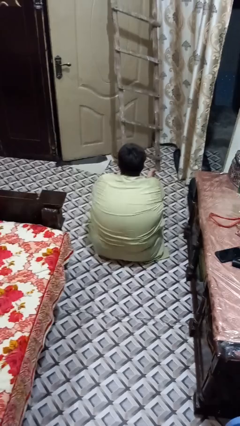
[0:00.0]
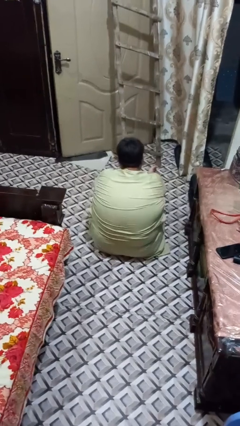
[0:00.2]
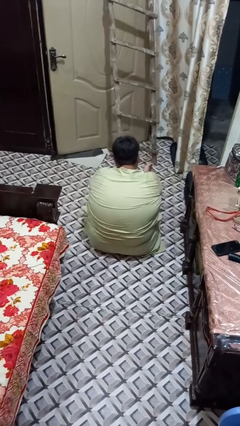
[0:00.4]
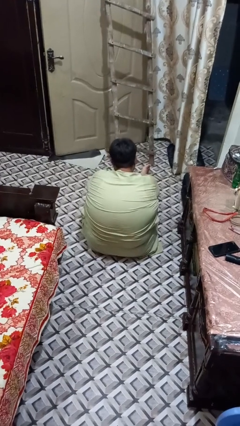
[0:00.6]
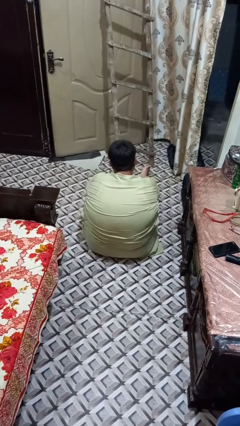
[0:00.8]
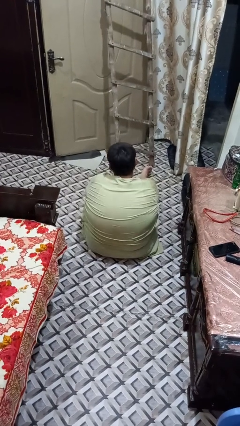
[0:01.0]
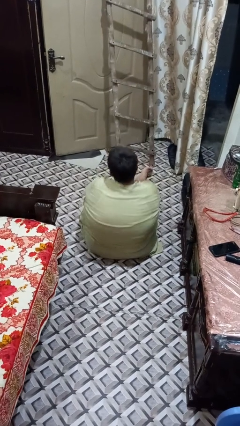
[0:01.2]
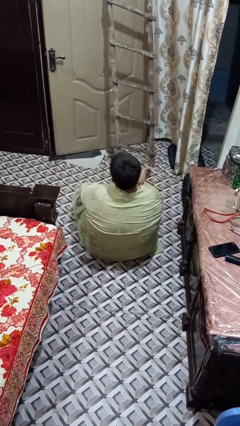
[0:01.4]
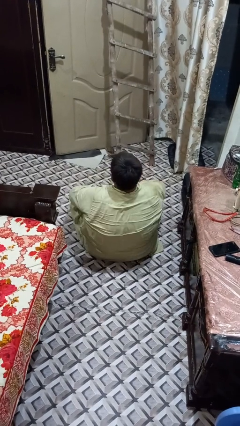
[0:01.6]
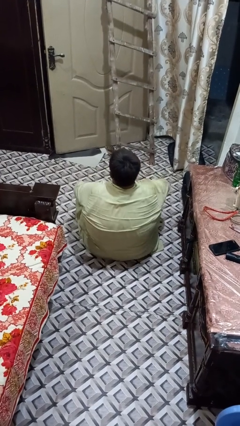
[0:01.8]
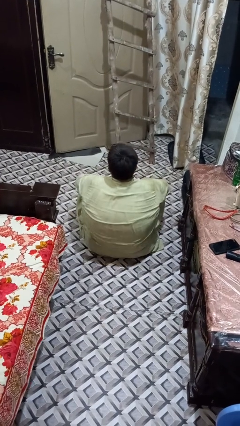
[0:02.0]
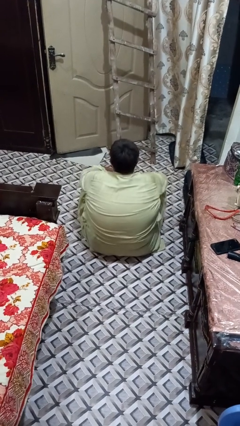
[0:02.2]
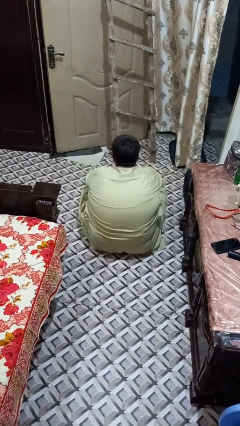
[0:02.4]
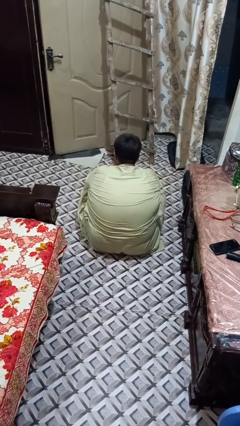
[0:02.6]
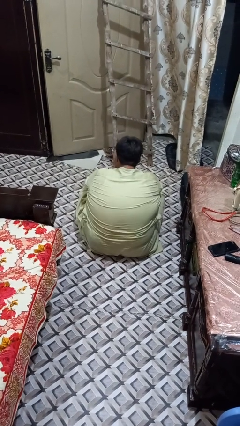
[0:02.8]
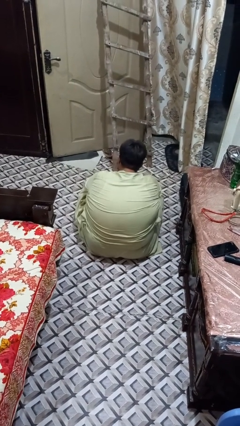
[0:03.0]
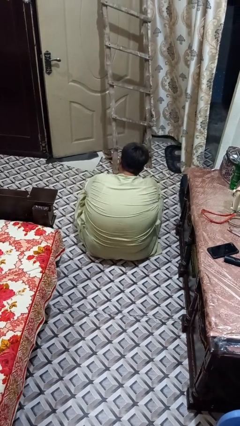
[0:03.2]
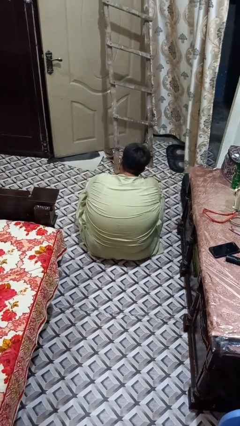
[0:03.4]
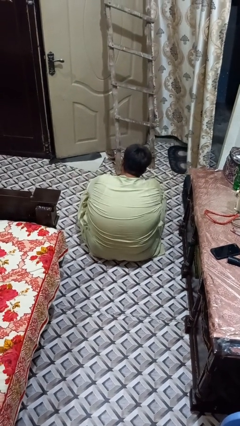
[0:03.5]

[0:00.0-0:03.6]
person crosses legs

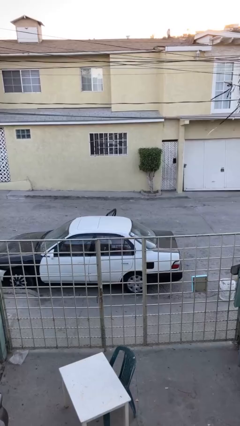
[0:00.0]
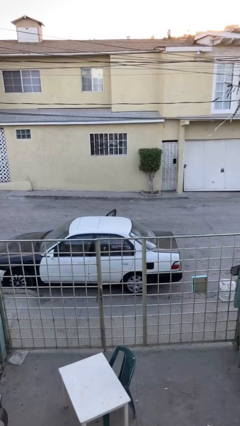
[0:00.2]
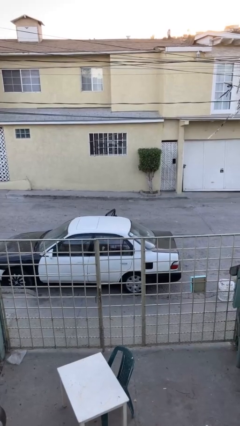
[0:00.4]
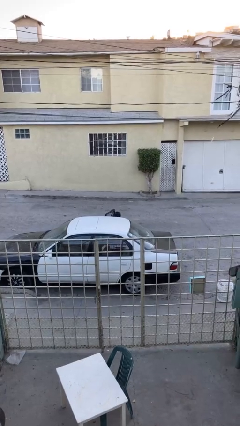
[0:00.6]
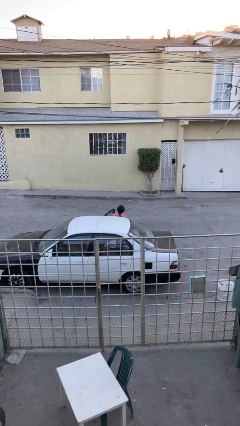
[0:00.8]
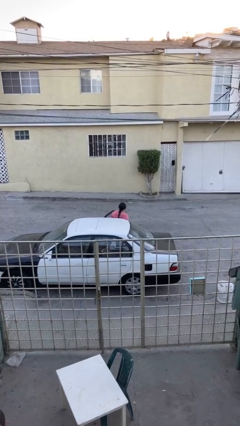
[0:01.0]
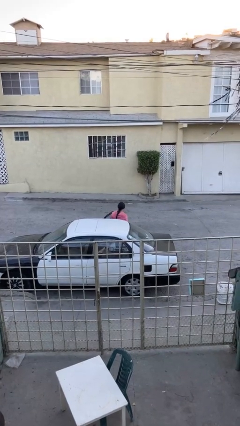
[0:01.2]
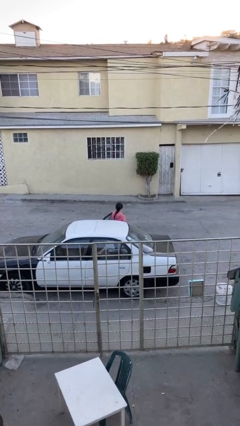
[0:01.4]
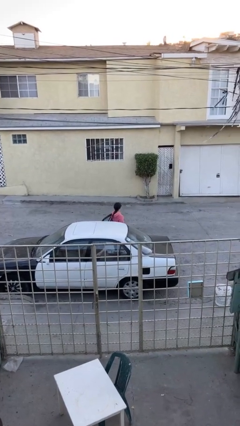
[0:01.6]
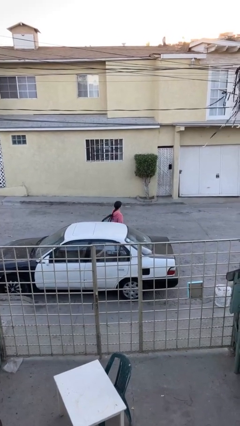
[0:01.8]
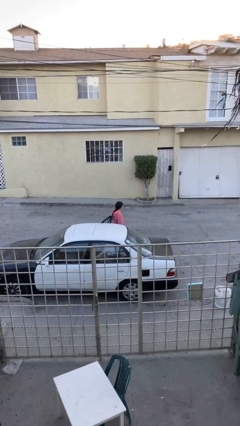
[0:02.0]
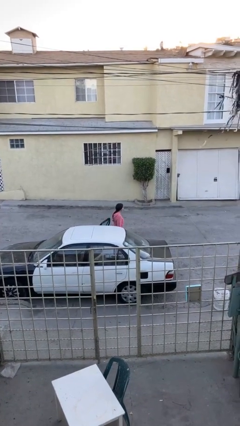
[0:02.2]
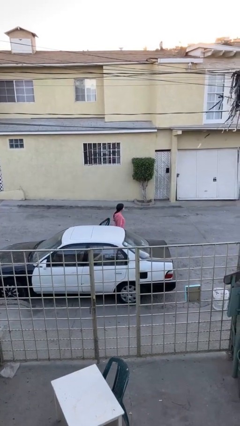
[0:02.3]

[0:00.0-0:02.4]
person exits car

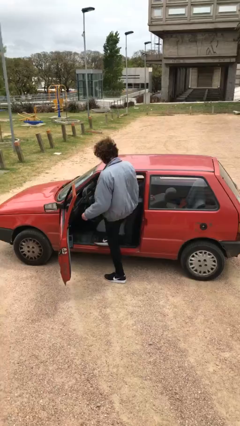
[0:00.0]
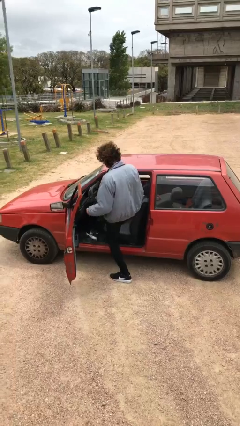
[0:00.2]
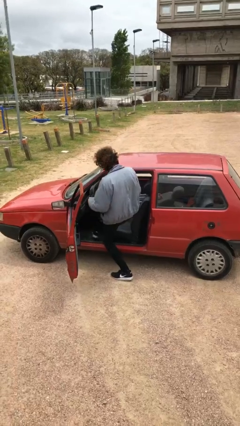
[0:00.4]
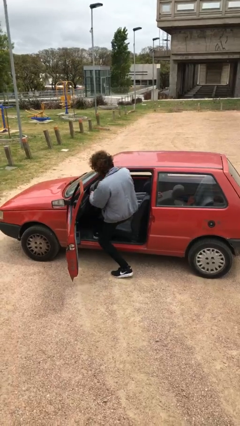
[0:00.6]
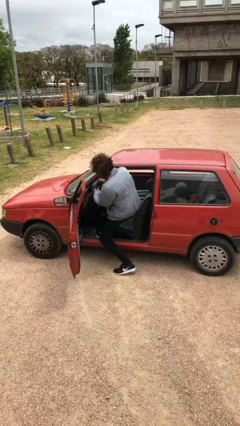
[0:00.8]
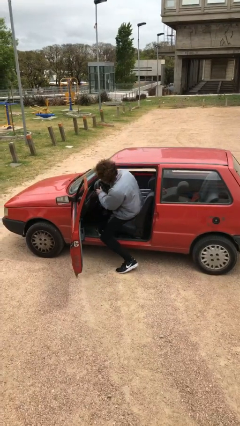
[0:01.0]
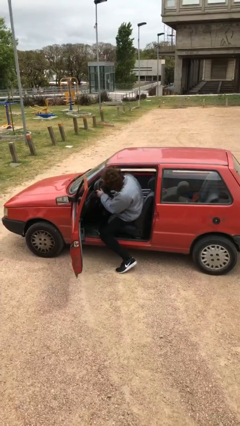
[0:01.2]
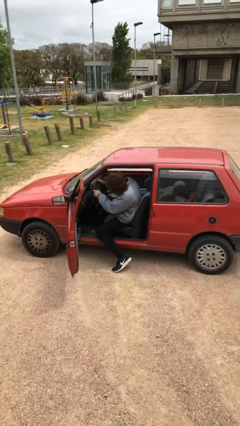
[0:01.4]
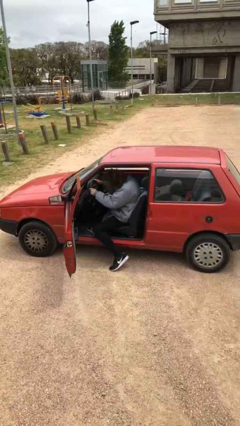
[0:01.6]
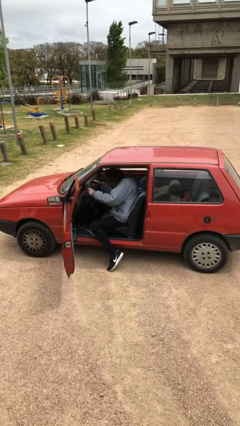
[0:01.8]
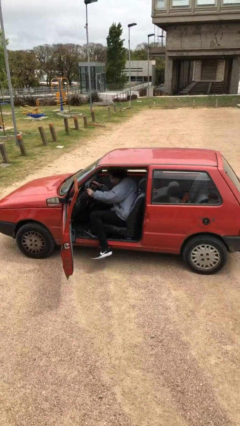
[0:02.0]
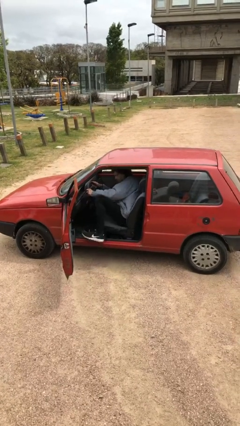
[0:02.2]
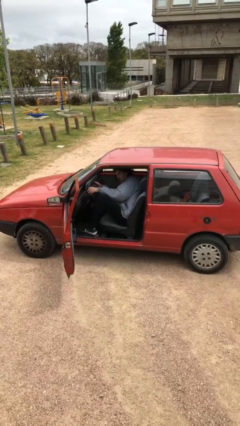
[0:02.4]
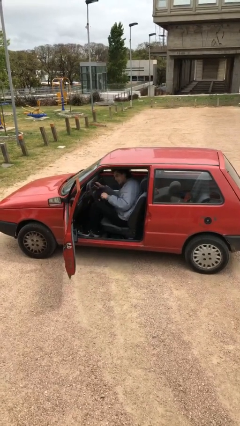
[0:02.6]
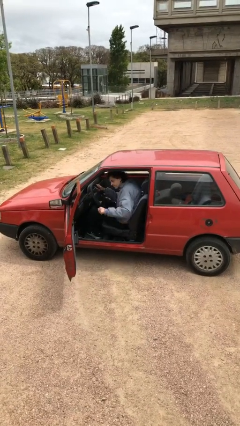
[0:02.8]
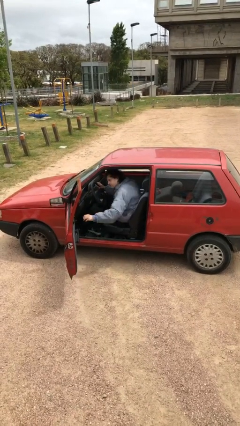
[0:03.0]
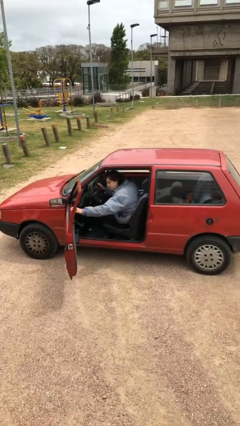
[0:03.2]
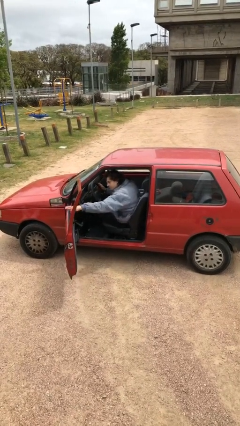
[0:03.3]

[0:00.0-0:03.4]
person enters car

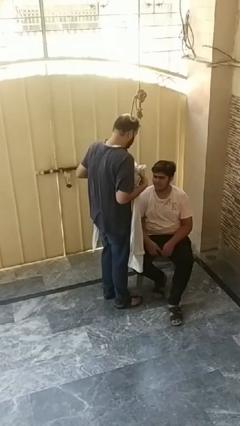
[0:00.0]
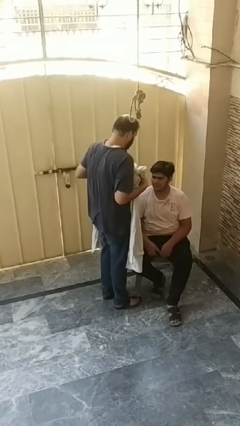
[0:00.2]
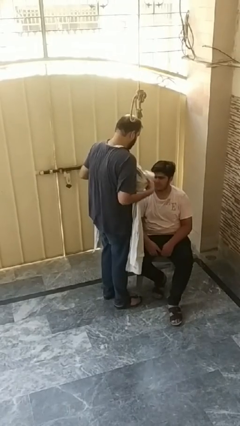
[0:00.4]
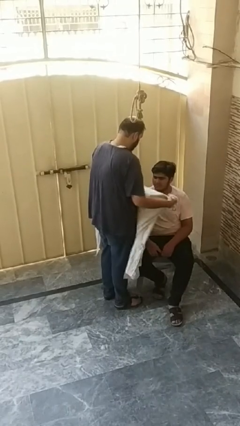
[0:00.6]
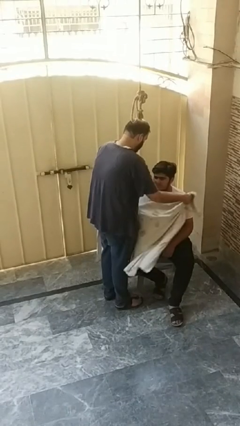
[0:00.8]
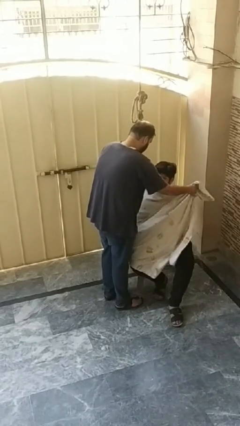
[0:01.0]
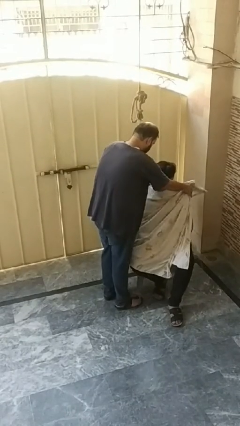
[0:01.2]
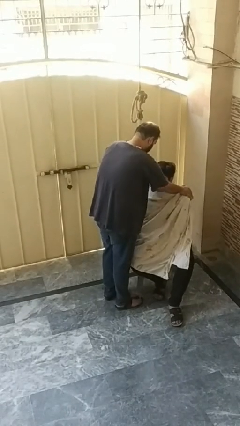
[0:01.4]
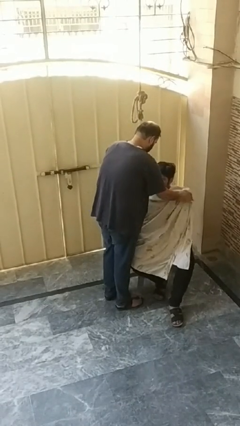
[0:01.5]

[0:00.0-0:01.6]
person covers friend with blanket

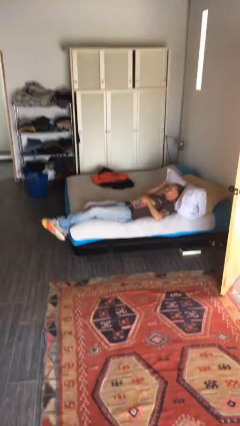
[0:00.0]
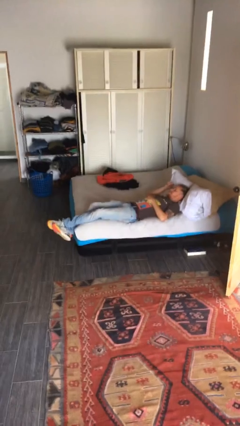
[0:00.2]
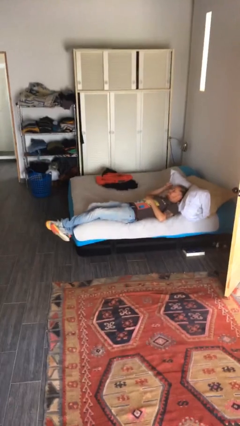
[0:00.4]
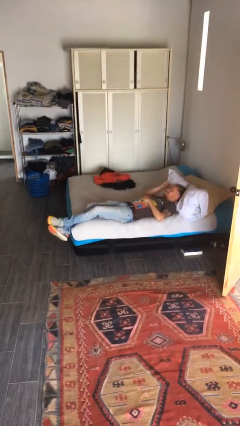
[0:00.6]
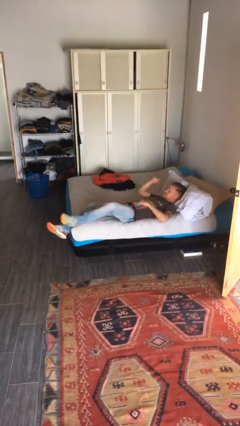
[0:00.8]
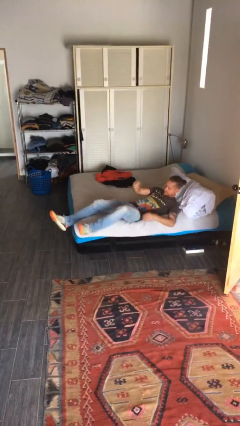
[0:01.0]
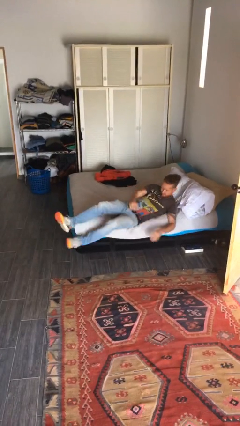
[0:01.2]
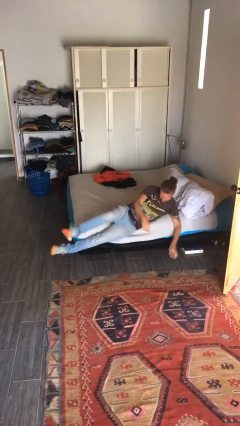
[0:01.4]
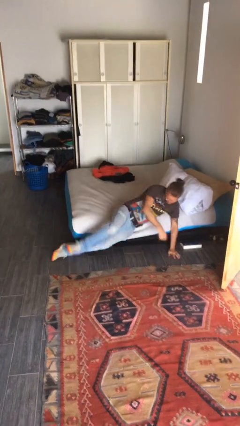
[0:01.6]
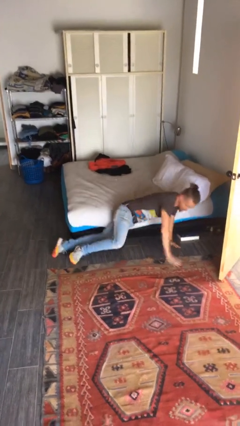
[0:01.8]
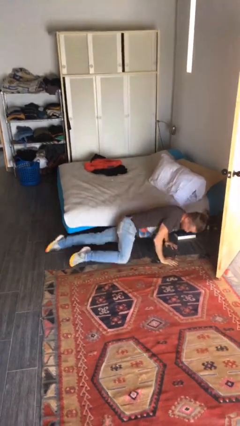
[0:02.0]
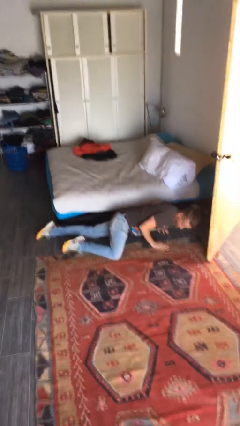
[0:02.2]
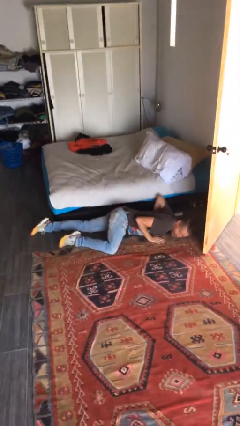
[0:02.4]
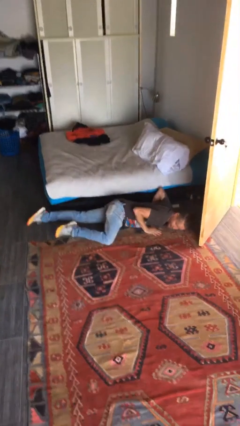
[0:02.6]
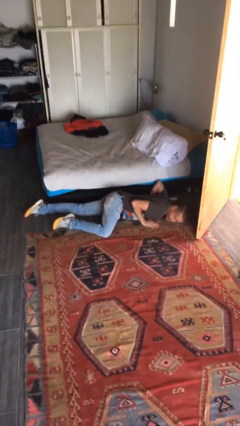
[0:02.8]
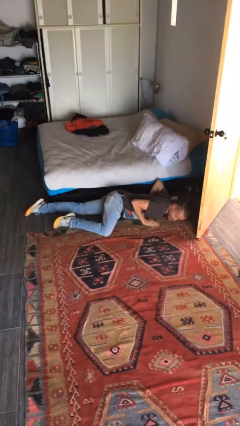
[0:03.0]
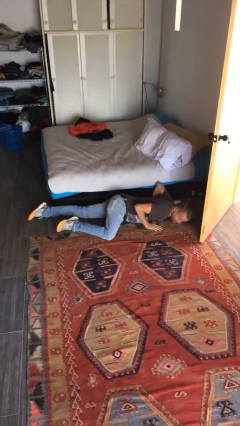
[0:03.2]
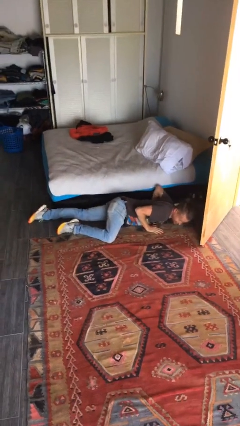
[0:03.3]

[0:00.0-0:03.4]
person falls from bed

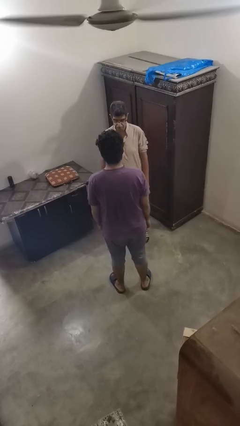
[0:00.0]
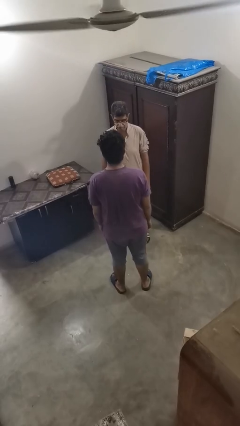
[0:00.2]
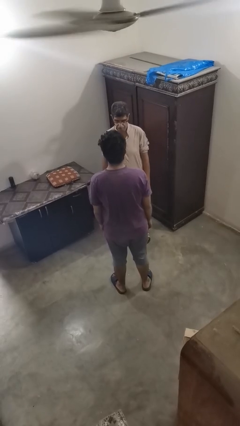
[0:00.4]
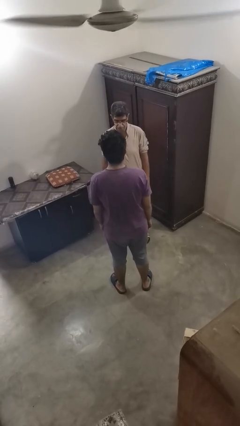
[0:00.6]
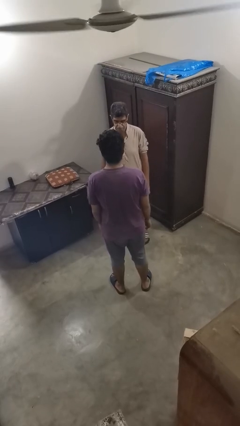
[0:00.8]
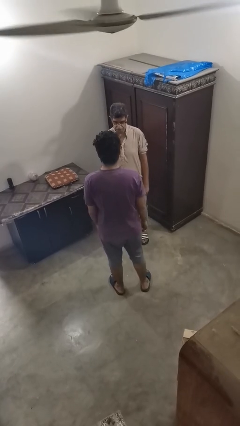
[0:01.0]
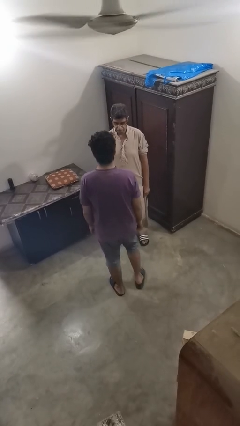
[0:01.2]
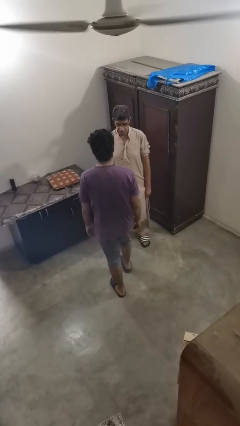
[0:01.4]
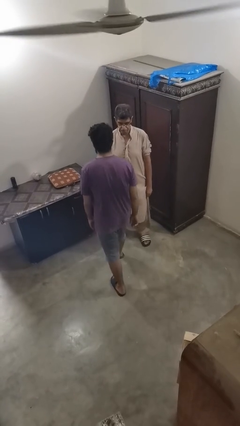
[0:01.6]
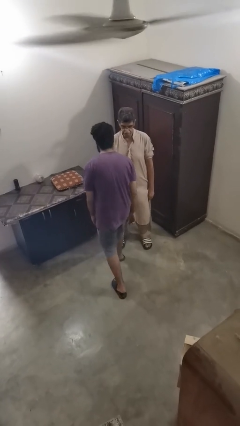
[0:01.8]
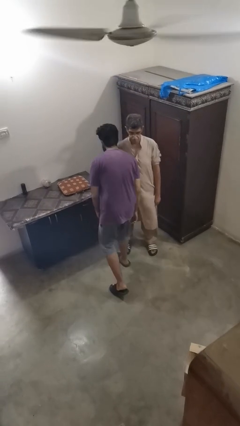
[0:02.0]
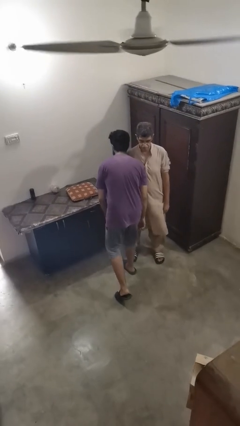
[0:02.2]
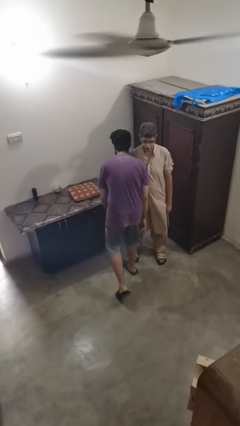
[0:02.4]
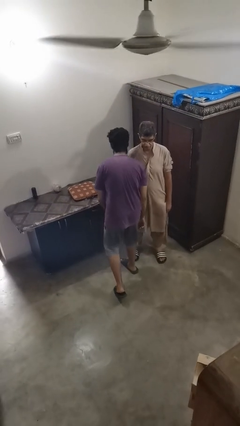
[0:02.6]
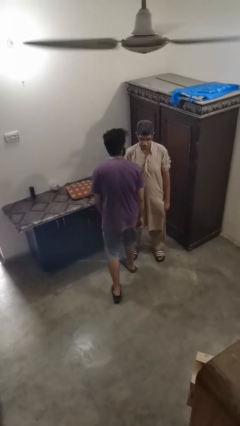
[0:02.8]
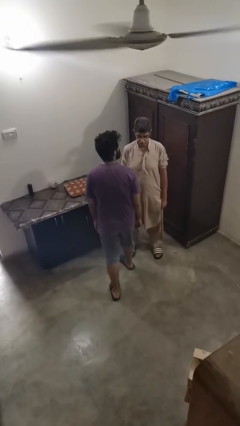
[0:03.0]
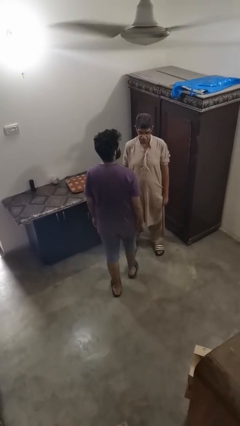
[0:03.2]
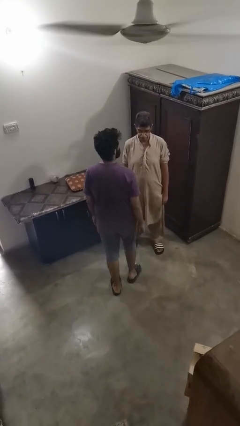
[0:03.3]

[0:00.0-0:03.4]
person bumps into person
